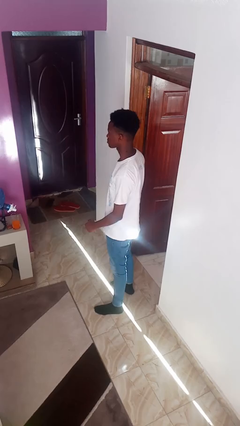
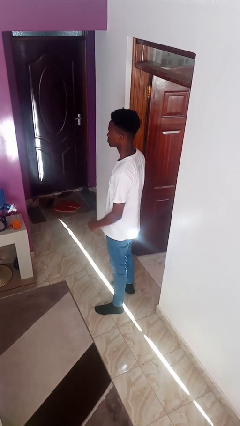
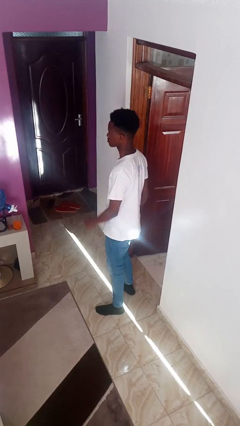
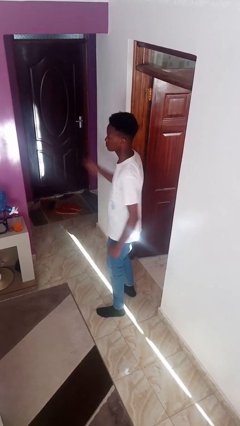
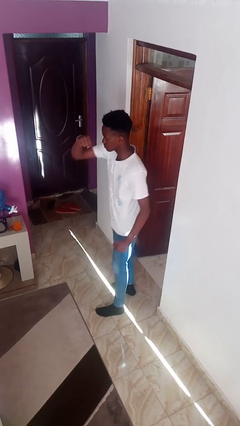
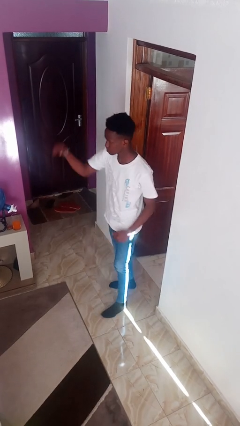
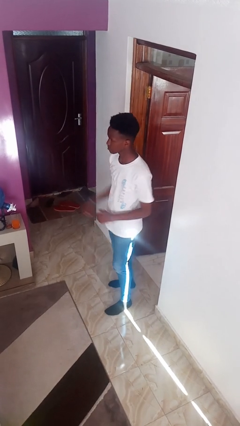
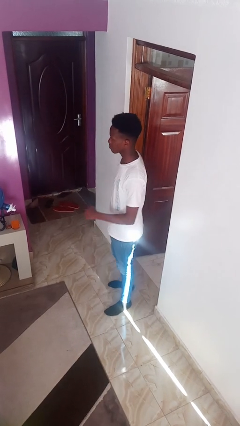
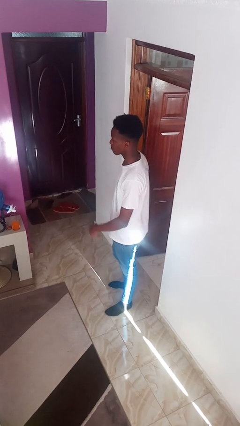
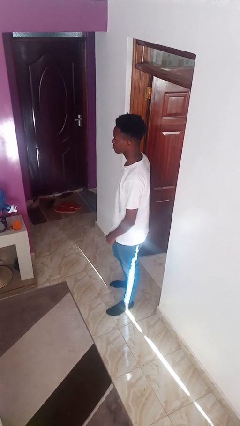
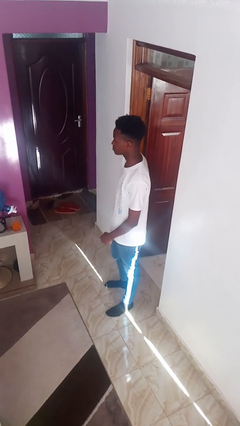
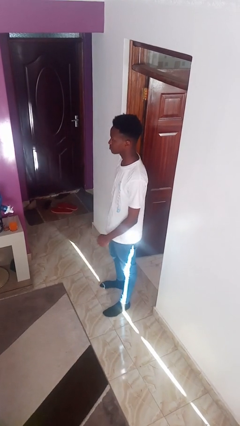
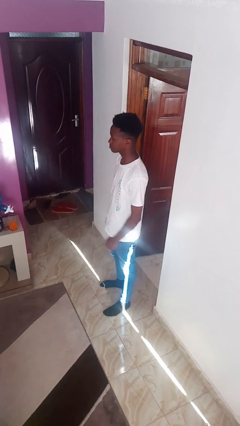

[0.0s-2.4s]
person punches

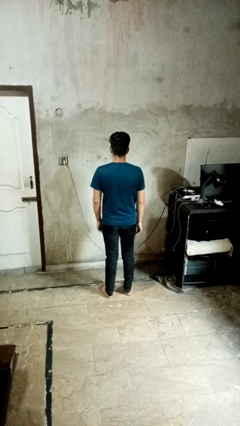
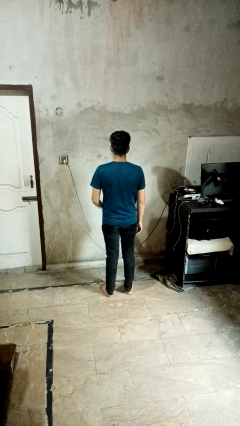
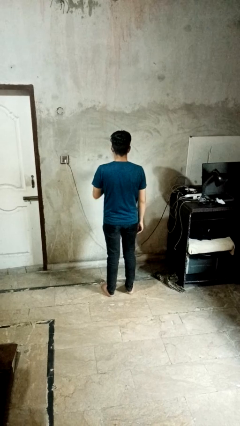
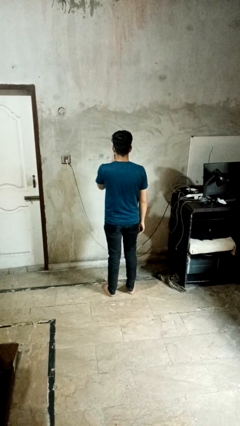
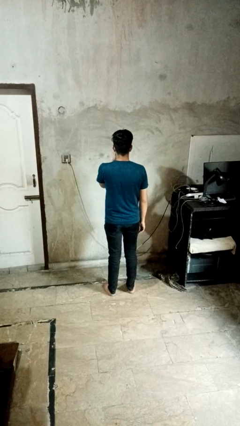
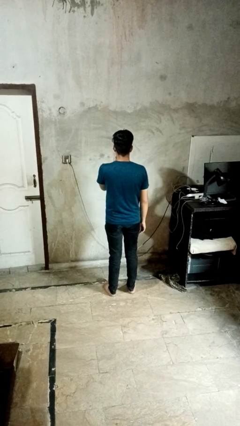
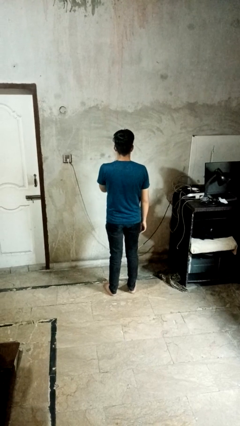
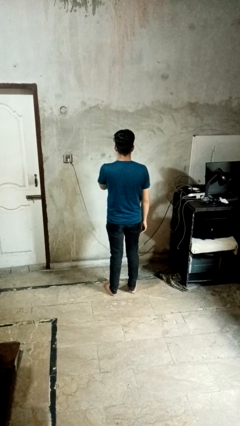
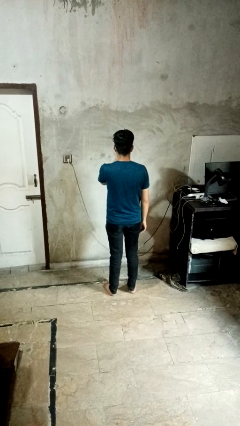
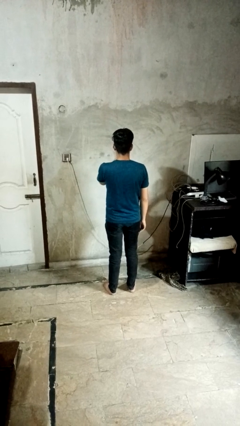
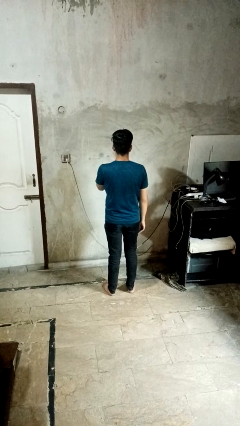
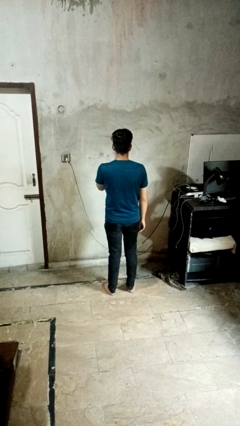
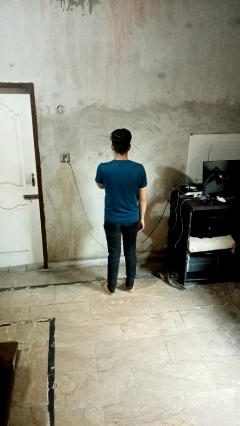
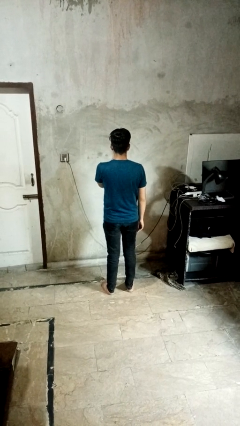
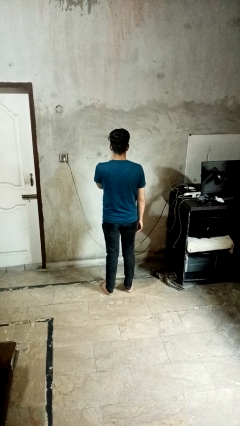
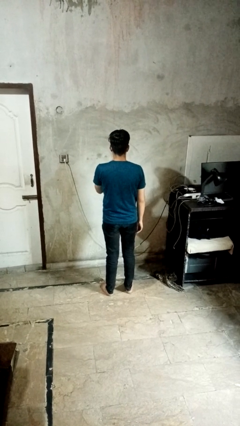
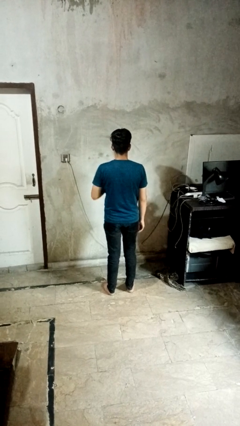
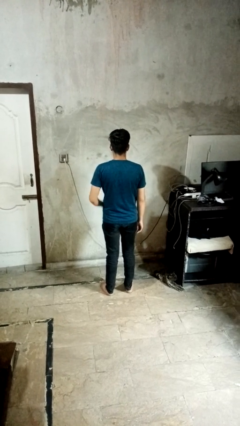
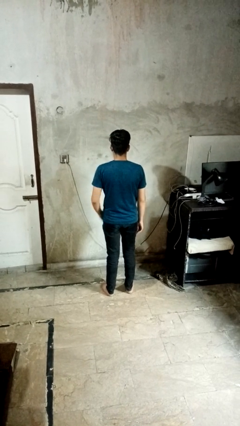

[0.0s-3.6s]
person licks fingers

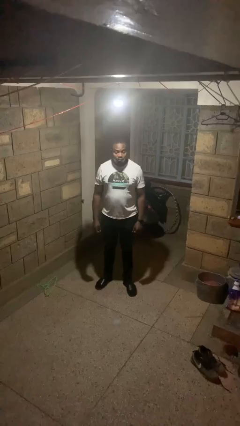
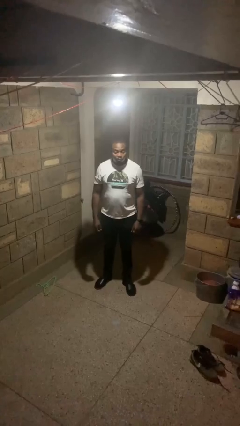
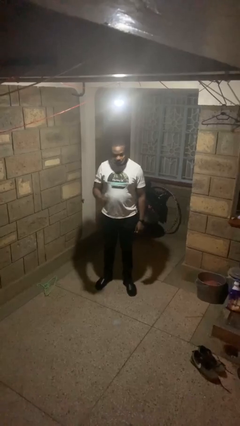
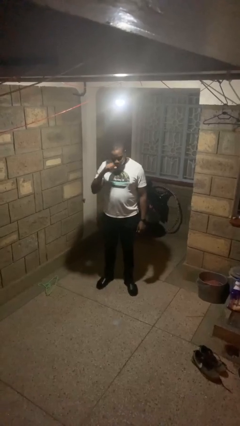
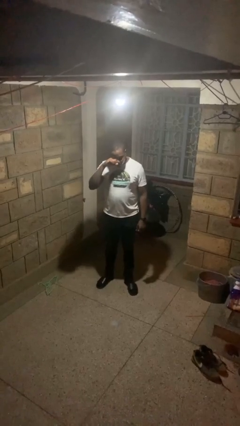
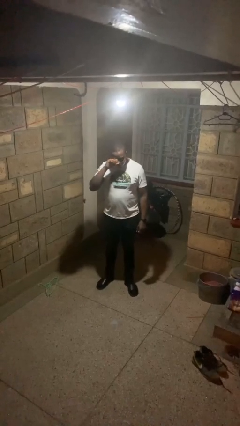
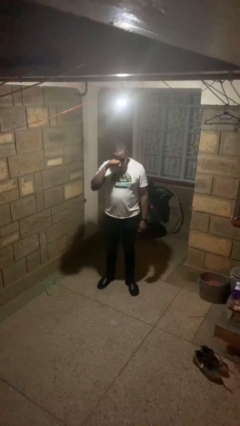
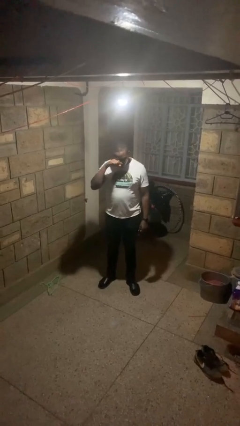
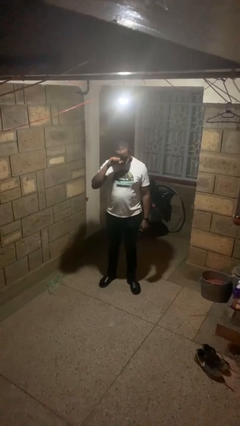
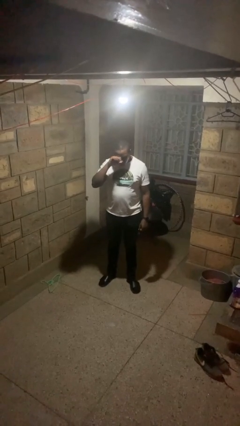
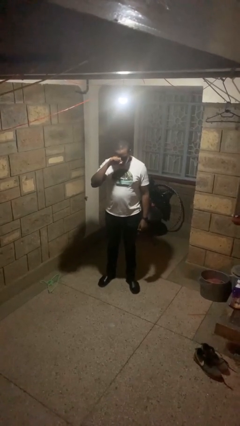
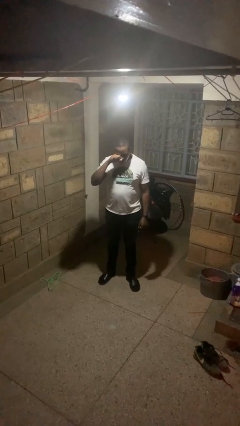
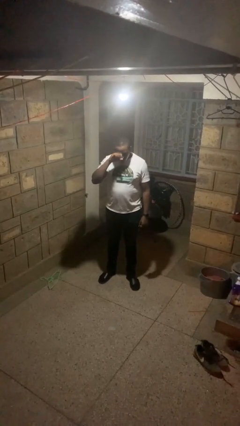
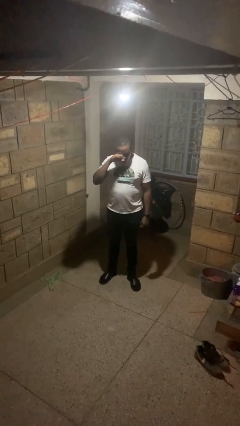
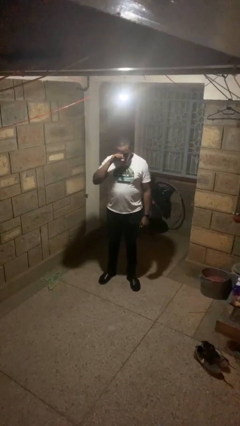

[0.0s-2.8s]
person rubs eyes

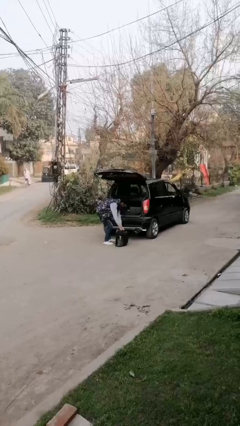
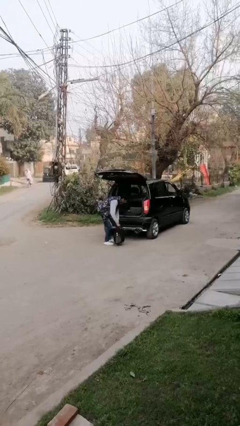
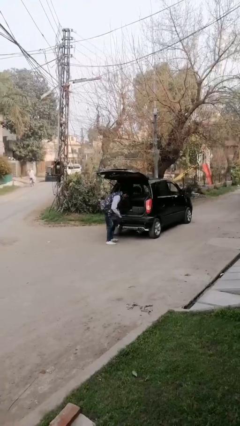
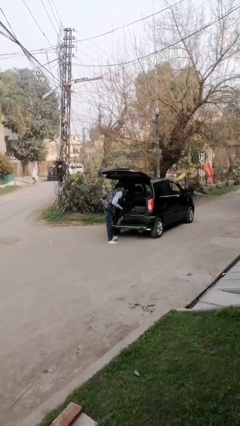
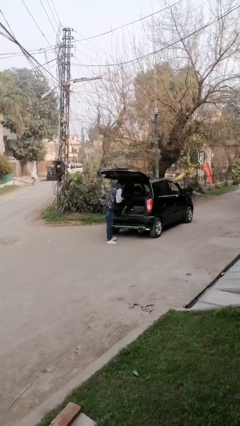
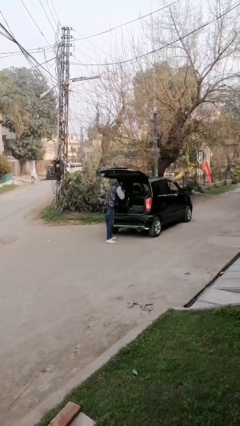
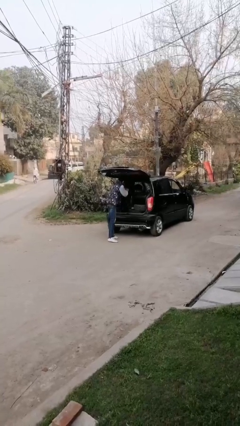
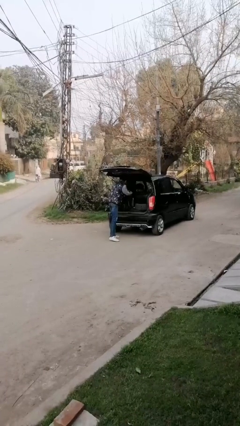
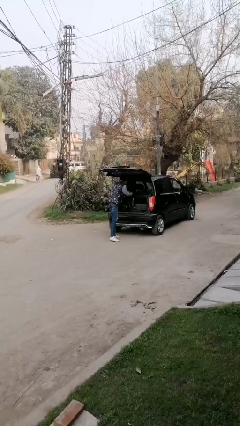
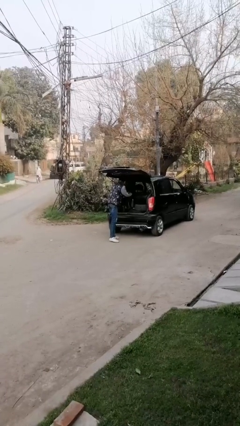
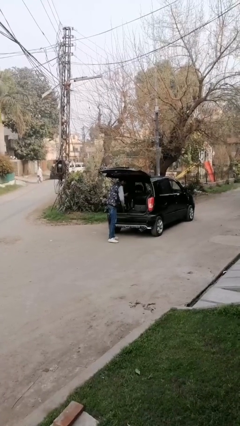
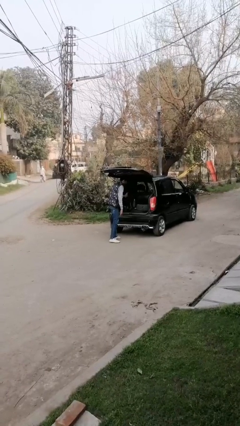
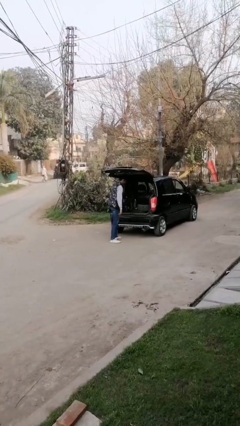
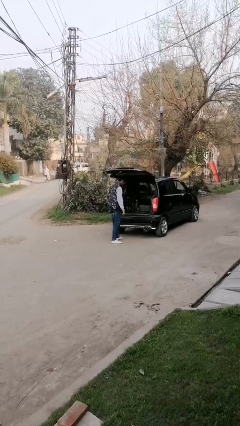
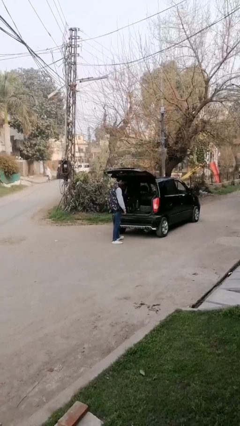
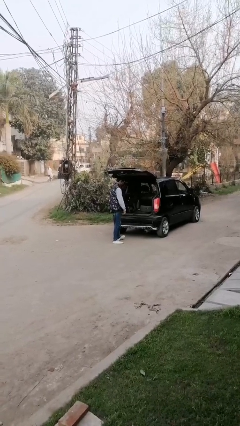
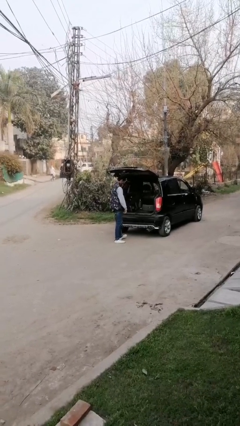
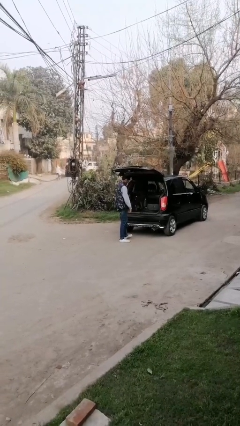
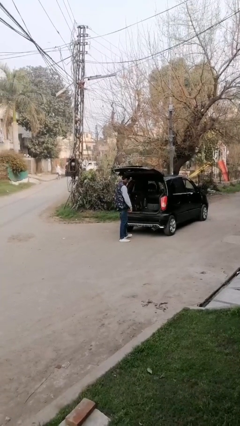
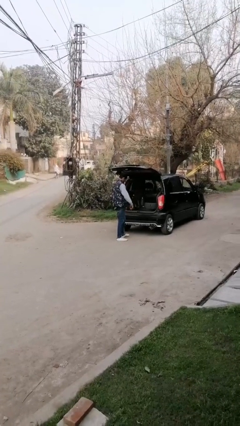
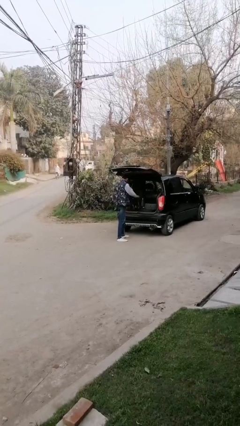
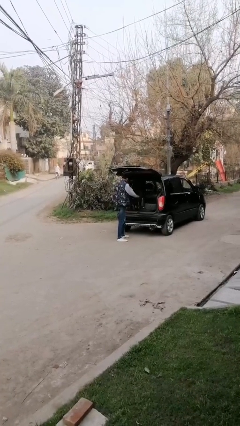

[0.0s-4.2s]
person loads car

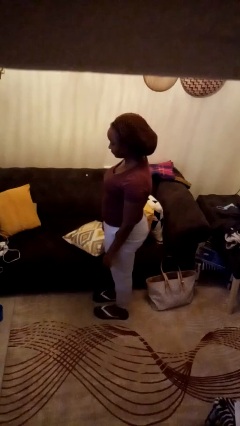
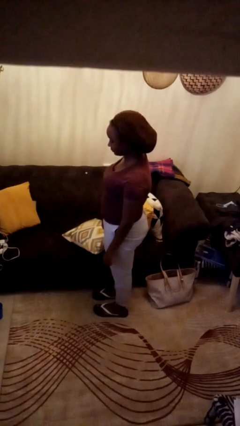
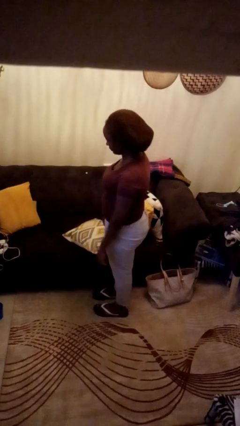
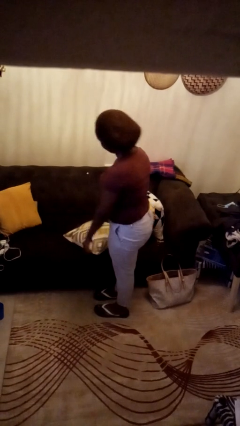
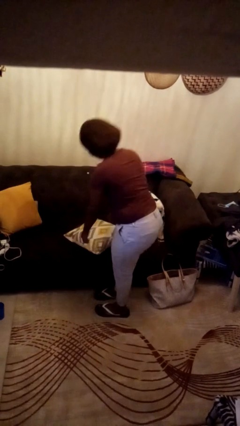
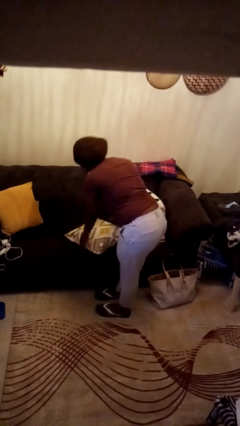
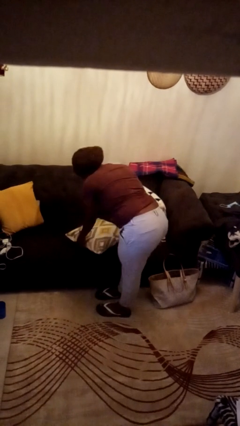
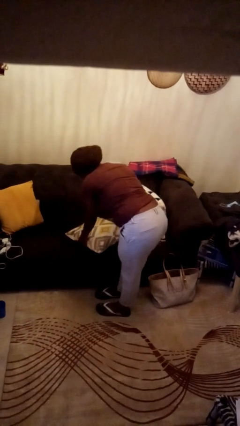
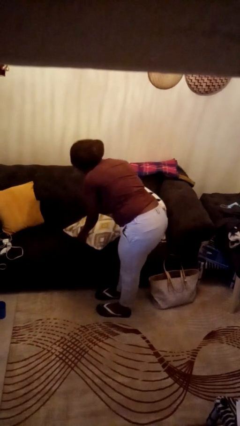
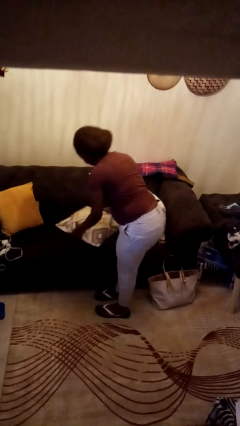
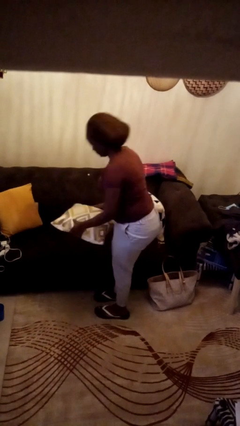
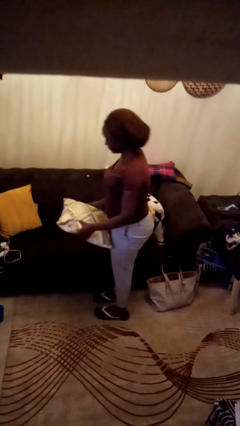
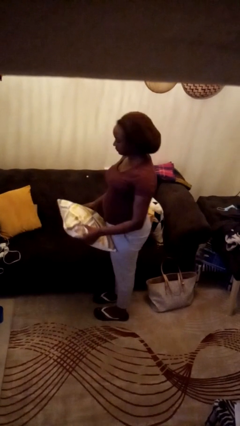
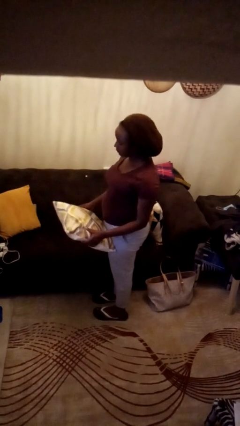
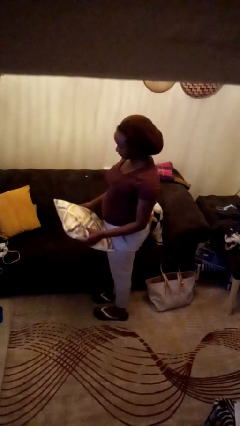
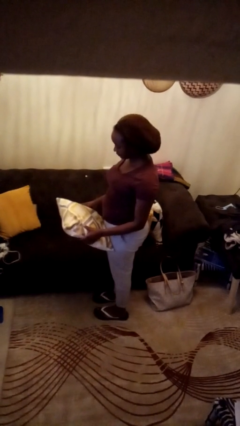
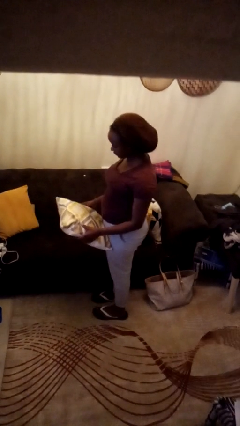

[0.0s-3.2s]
person picks up object from couch

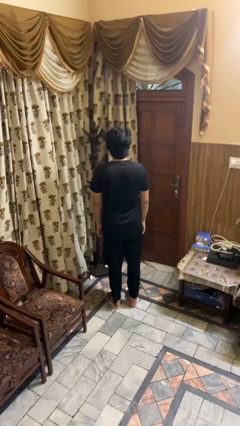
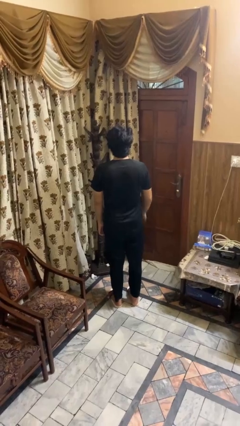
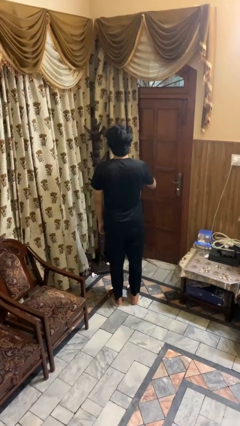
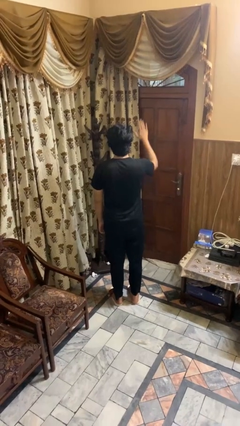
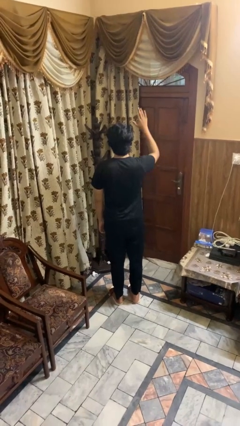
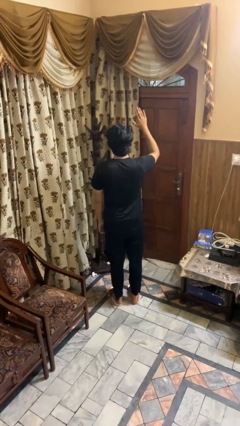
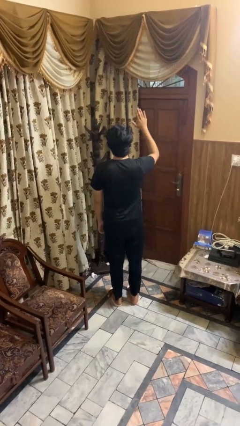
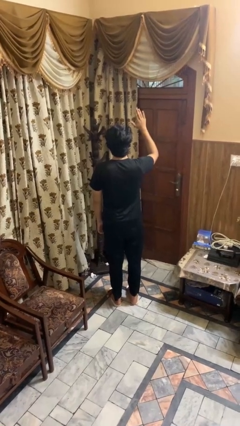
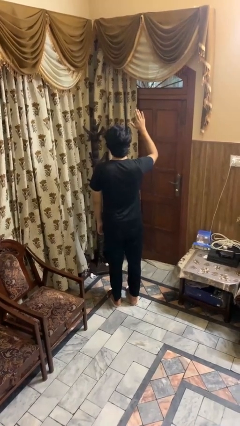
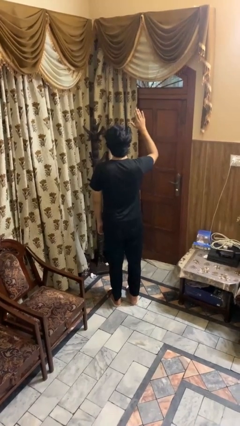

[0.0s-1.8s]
person gestures raise hand
